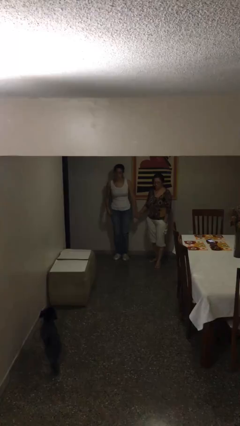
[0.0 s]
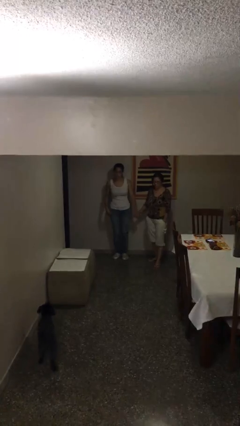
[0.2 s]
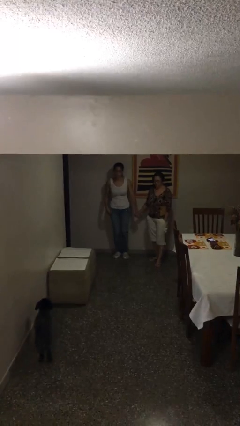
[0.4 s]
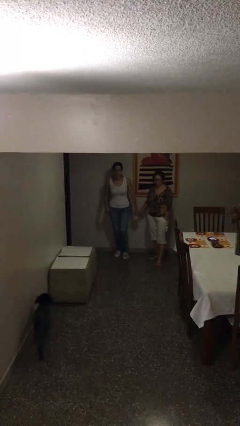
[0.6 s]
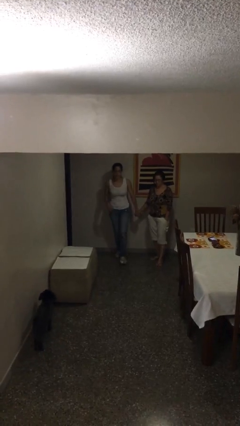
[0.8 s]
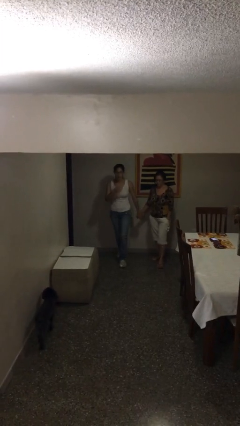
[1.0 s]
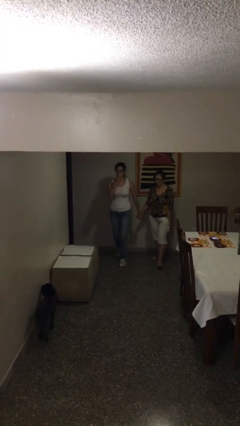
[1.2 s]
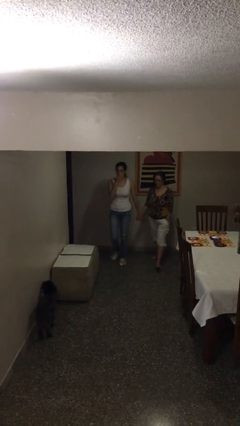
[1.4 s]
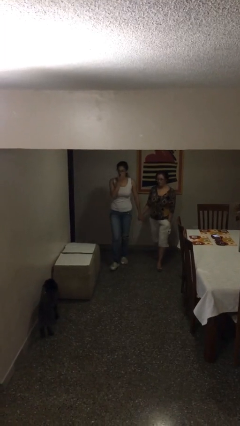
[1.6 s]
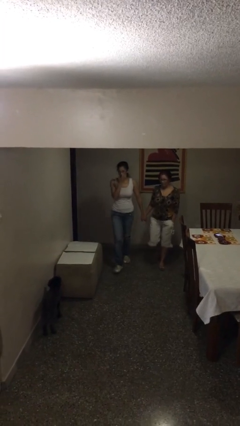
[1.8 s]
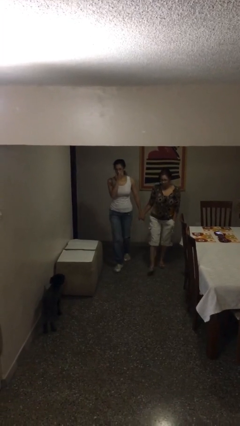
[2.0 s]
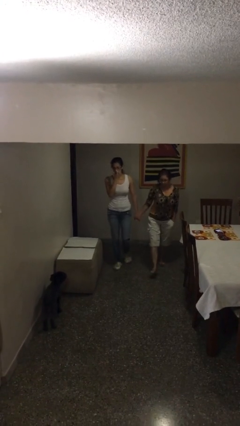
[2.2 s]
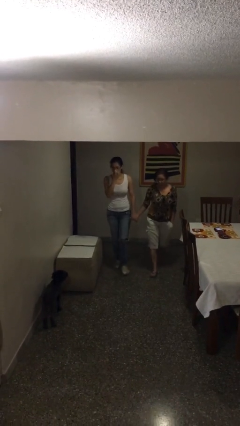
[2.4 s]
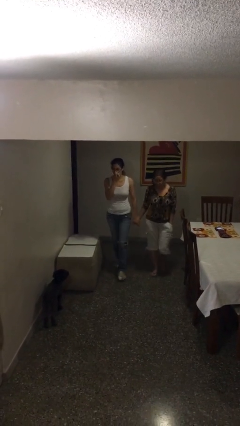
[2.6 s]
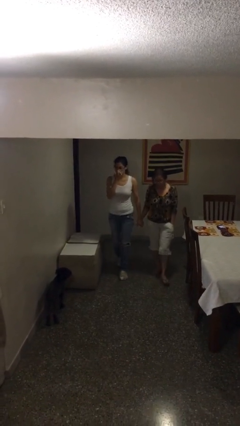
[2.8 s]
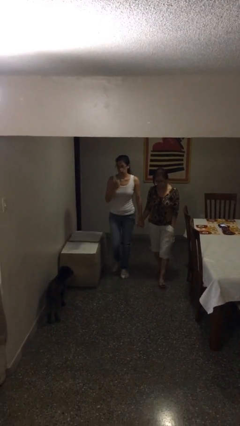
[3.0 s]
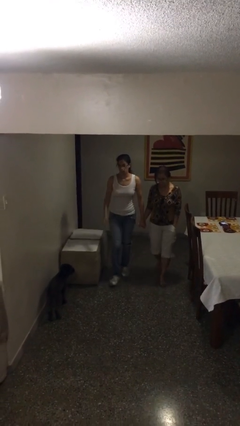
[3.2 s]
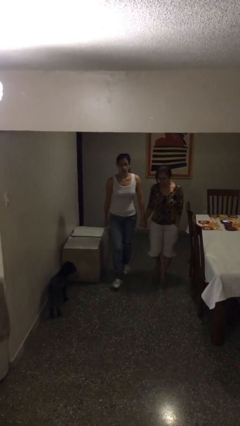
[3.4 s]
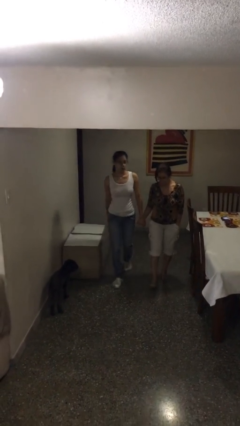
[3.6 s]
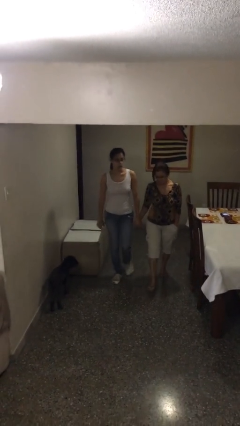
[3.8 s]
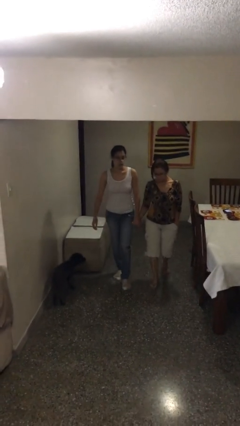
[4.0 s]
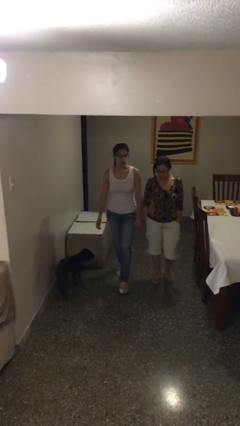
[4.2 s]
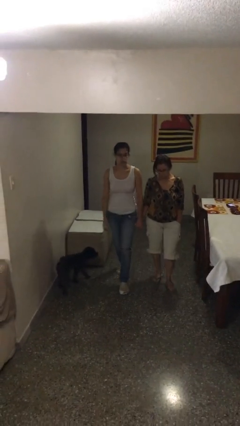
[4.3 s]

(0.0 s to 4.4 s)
person holds hand

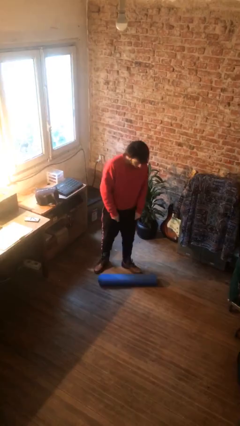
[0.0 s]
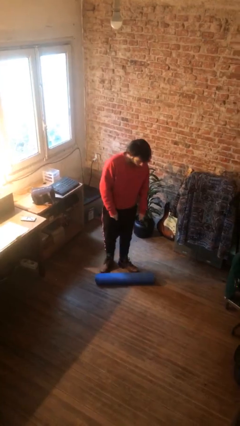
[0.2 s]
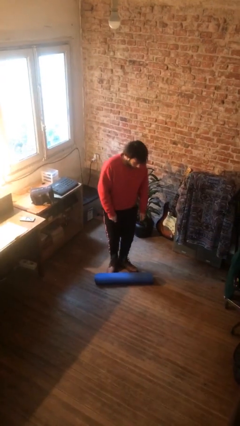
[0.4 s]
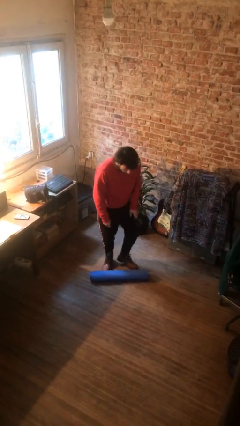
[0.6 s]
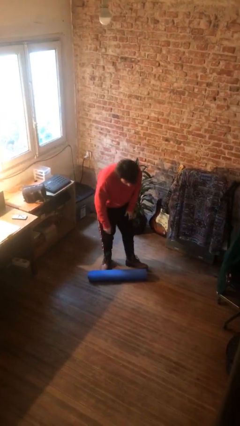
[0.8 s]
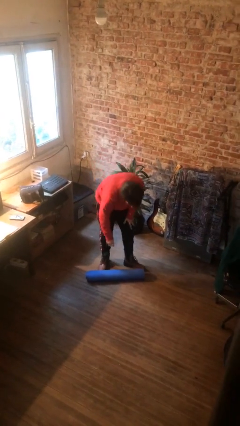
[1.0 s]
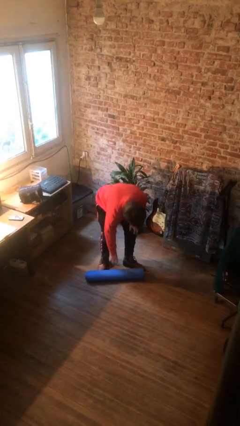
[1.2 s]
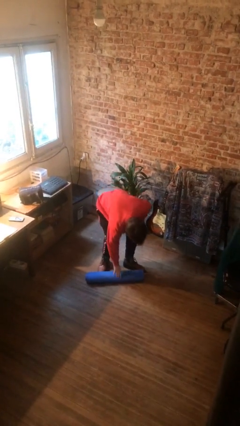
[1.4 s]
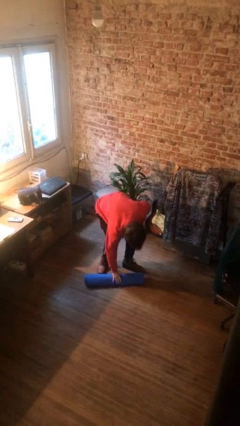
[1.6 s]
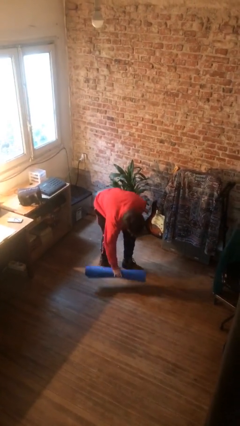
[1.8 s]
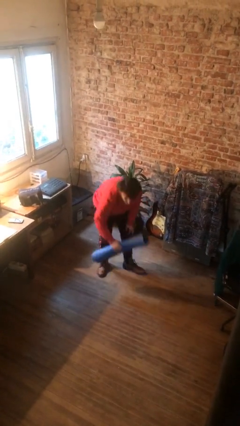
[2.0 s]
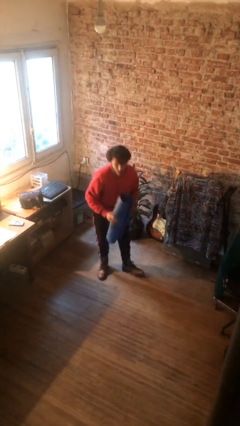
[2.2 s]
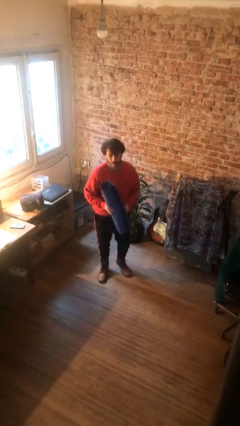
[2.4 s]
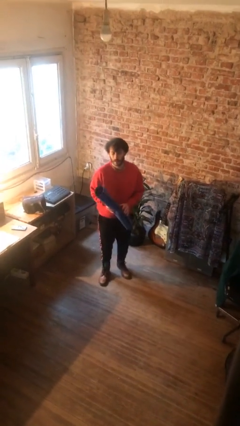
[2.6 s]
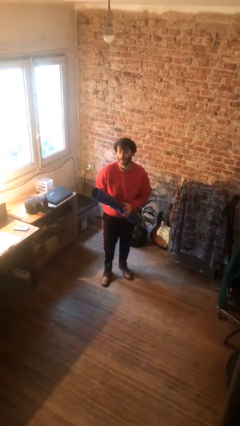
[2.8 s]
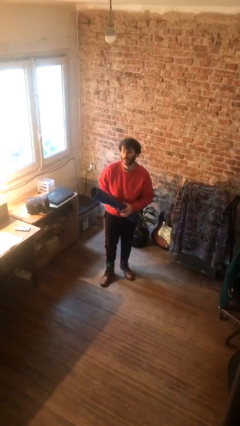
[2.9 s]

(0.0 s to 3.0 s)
person picks up object from floor

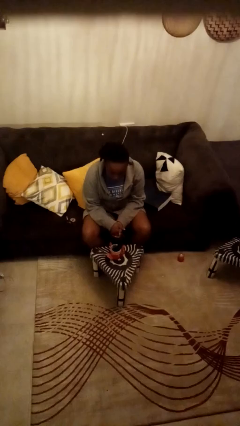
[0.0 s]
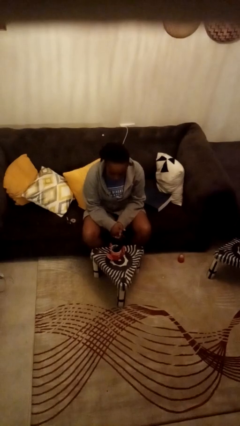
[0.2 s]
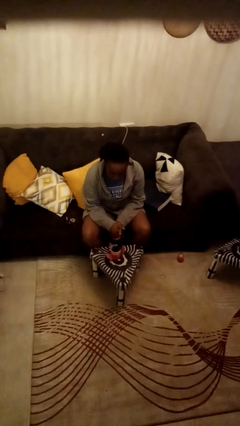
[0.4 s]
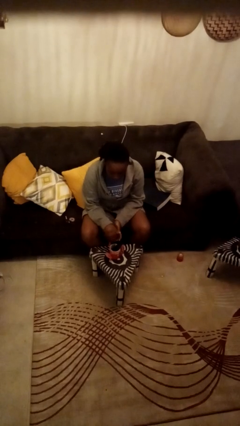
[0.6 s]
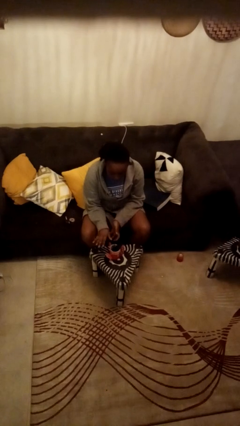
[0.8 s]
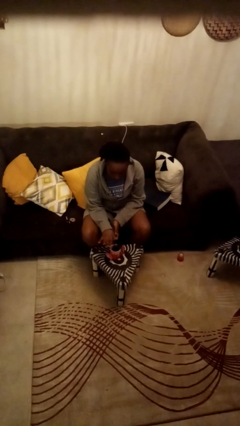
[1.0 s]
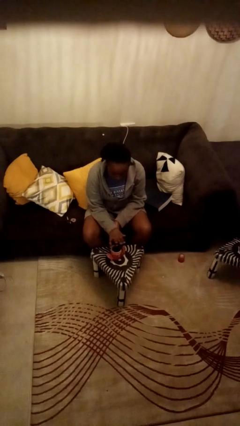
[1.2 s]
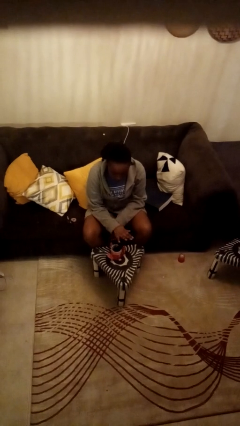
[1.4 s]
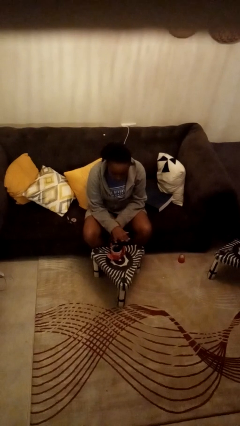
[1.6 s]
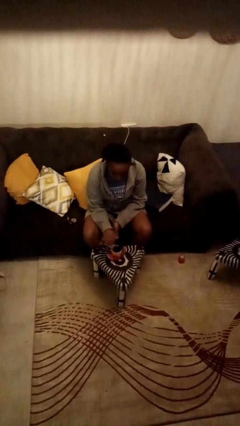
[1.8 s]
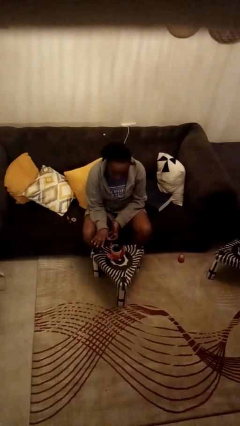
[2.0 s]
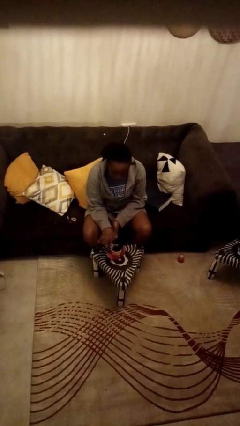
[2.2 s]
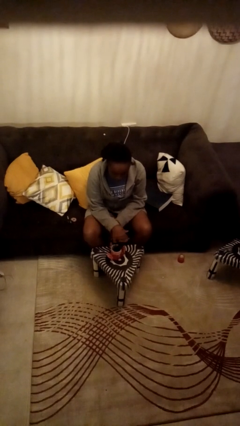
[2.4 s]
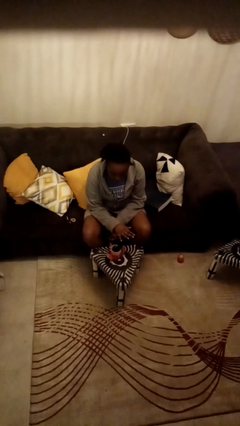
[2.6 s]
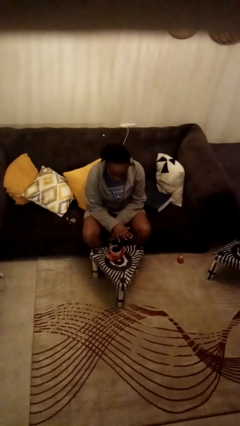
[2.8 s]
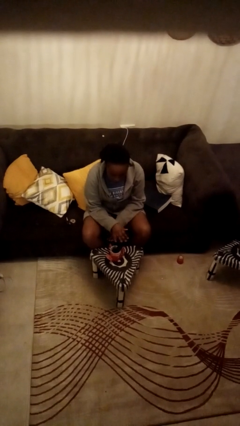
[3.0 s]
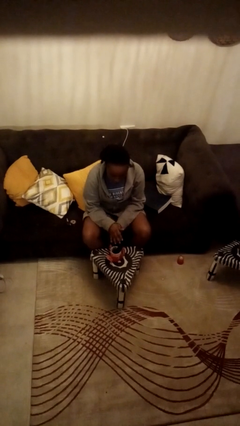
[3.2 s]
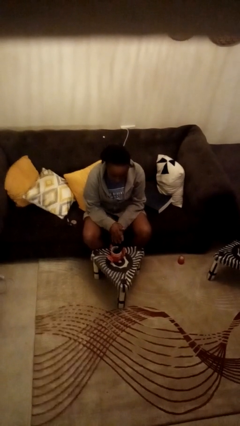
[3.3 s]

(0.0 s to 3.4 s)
person waves hand over object

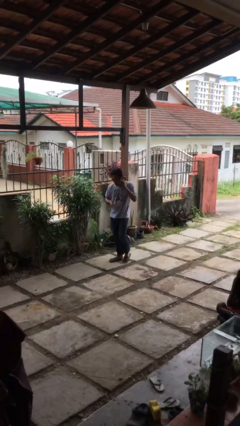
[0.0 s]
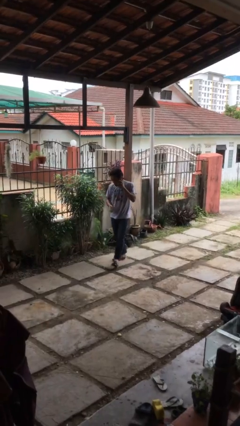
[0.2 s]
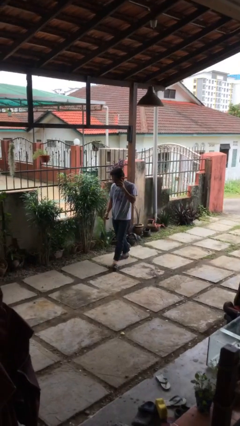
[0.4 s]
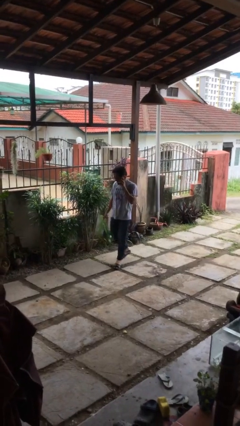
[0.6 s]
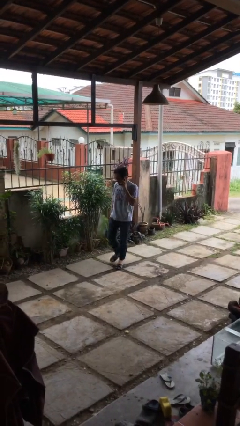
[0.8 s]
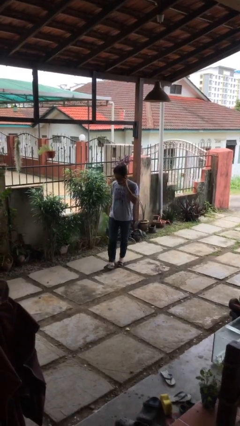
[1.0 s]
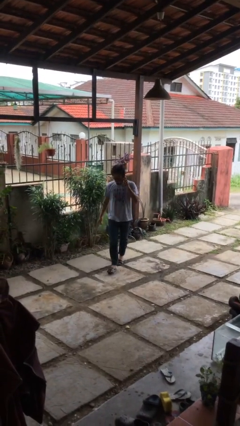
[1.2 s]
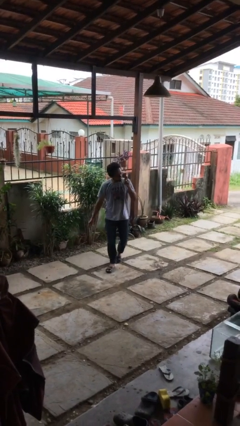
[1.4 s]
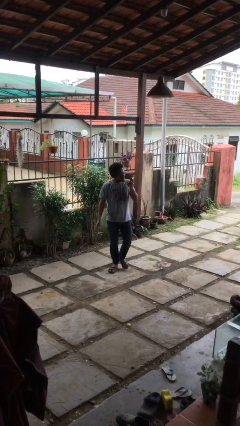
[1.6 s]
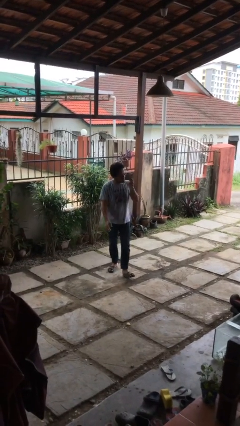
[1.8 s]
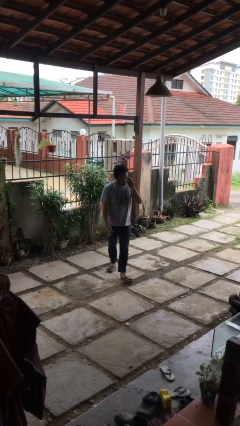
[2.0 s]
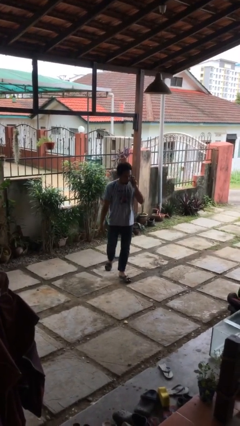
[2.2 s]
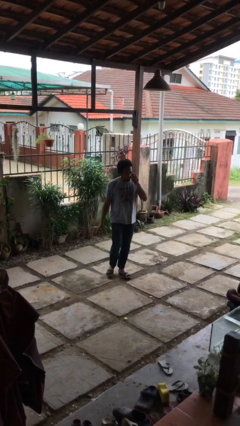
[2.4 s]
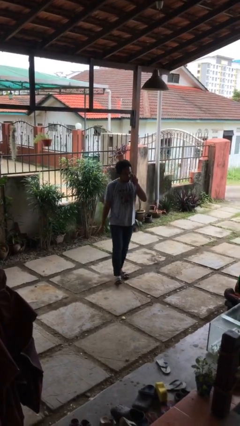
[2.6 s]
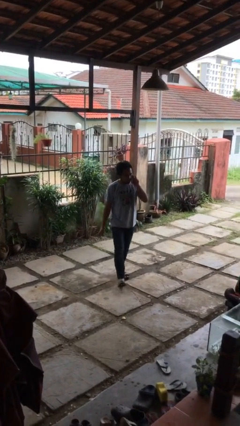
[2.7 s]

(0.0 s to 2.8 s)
person talks on phone

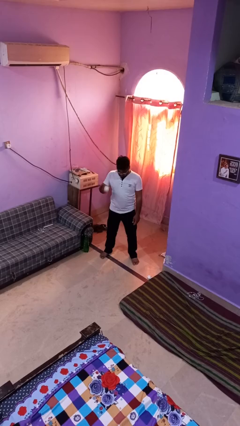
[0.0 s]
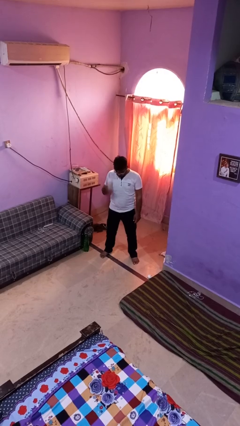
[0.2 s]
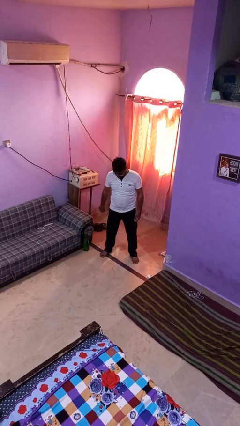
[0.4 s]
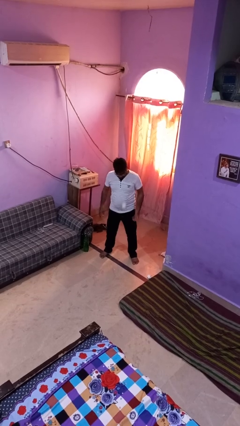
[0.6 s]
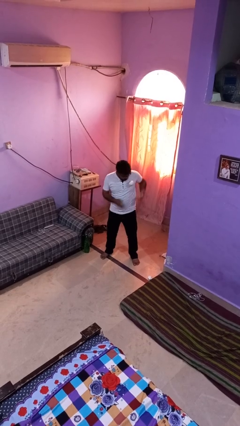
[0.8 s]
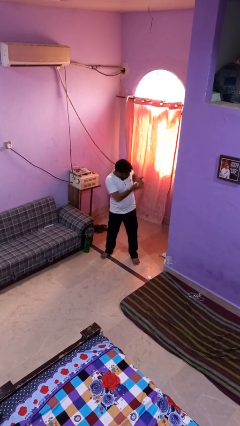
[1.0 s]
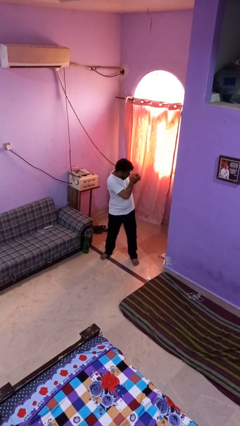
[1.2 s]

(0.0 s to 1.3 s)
person bounces ball on floor

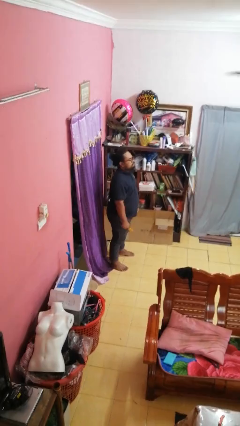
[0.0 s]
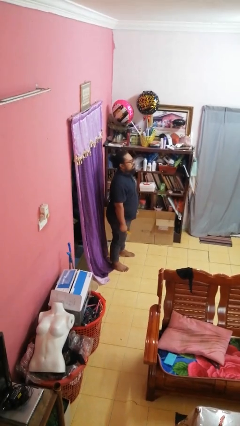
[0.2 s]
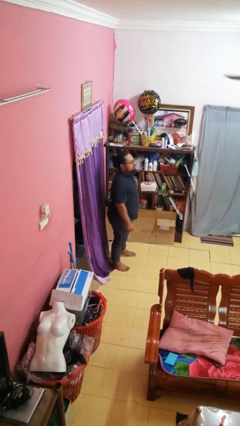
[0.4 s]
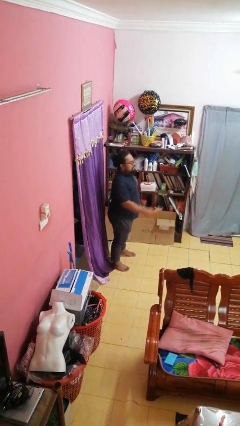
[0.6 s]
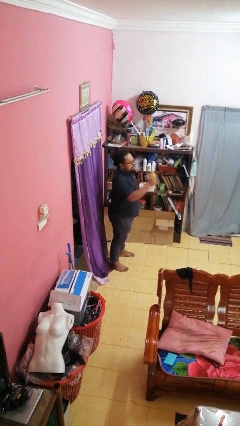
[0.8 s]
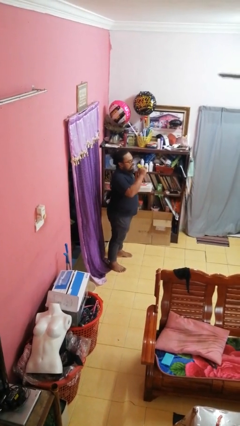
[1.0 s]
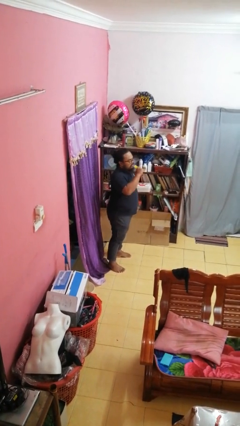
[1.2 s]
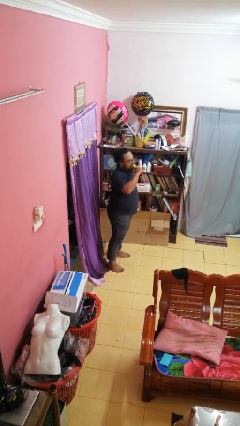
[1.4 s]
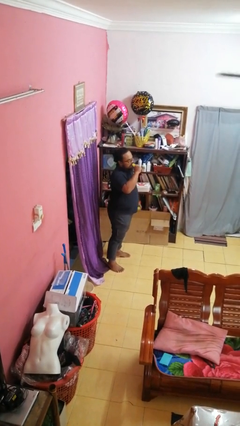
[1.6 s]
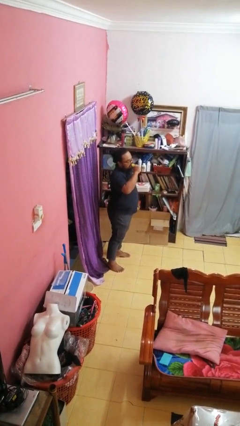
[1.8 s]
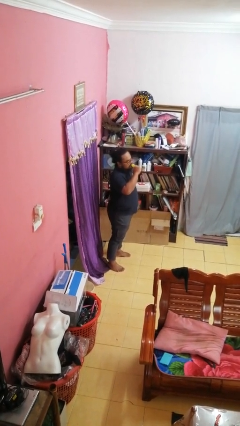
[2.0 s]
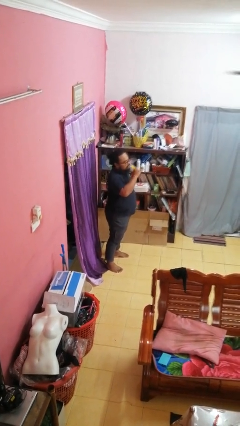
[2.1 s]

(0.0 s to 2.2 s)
person eats banana

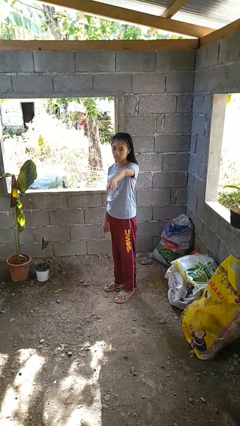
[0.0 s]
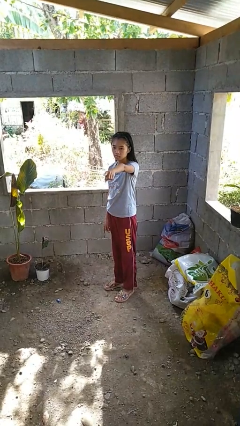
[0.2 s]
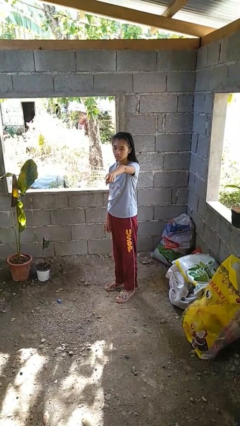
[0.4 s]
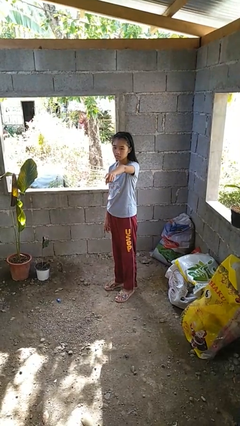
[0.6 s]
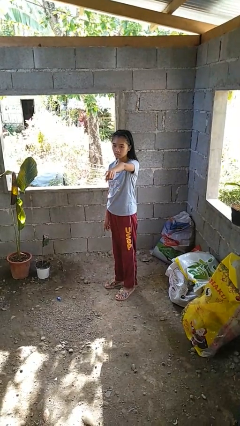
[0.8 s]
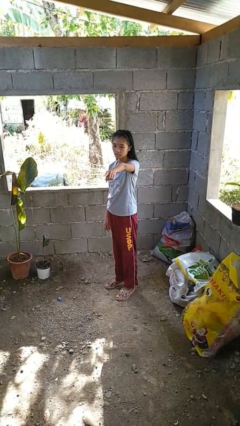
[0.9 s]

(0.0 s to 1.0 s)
person points at person
